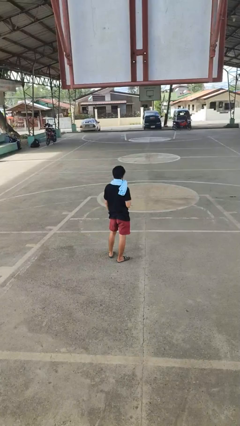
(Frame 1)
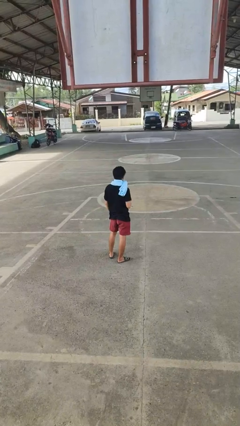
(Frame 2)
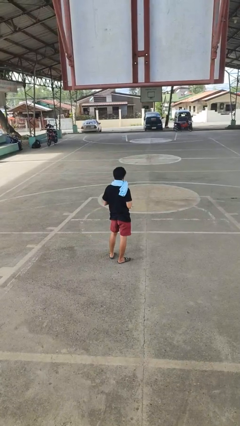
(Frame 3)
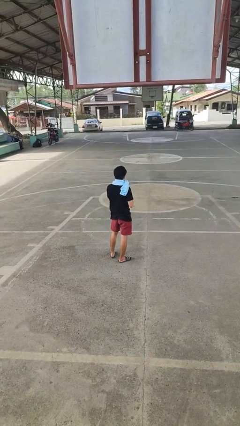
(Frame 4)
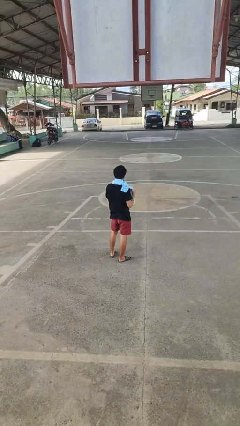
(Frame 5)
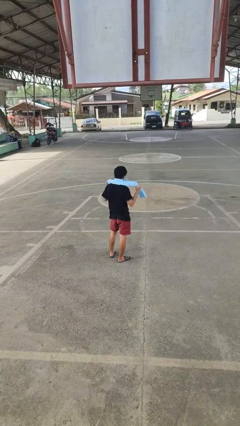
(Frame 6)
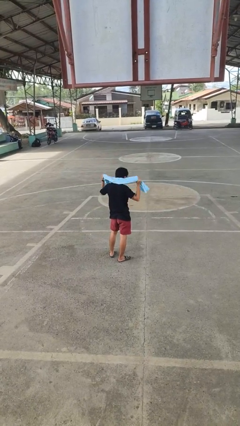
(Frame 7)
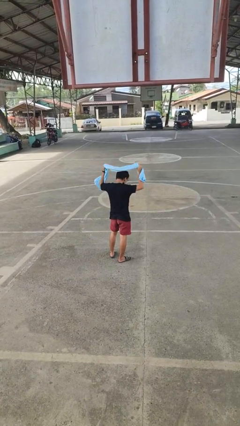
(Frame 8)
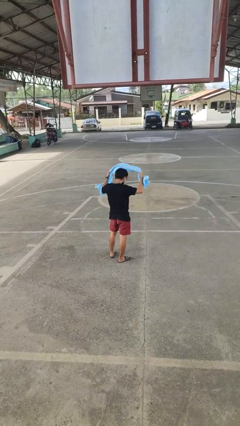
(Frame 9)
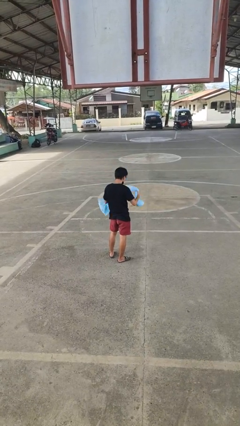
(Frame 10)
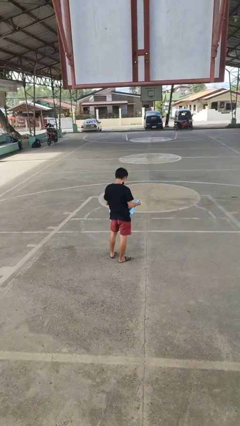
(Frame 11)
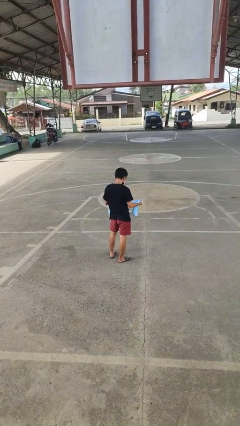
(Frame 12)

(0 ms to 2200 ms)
person takes off scarf

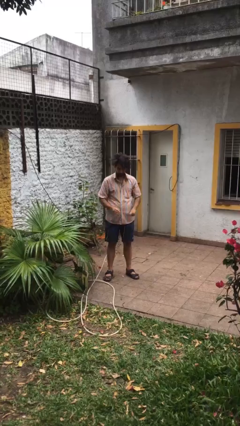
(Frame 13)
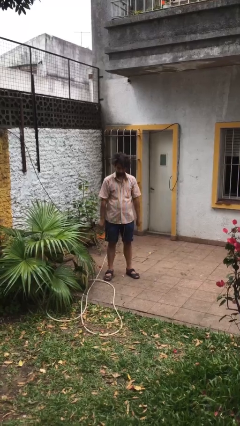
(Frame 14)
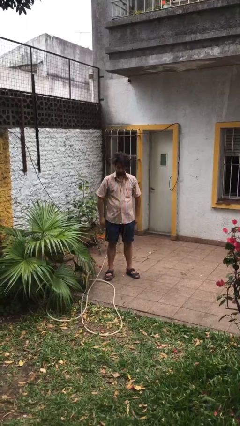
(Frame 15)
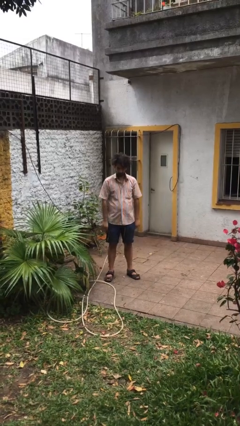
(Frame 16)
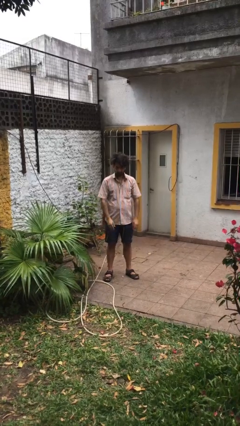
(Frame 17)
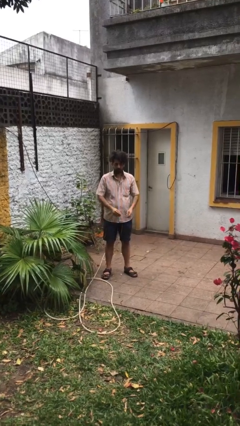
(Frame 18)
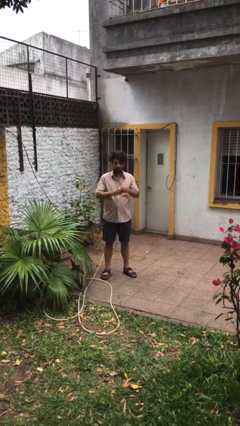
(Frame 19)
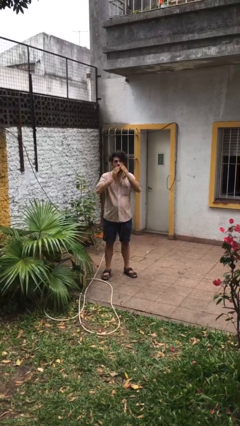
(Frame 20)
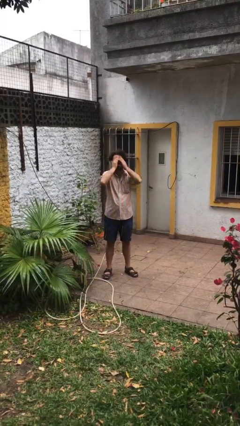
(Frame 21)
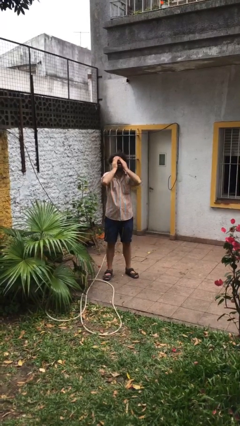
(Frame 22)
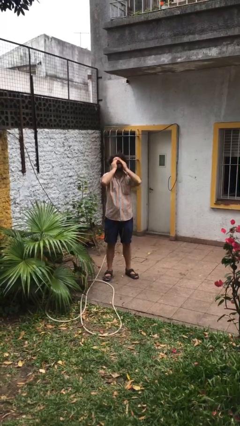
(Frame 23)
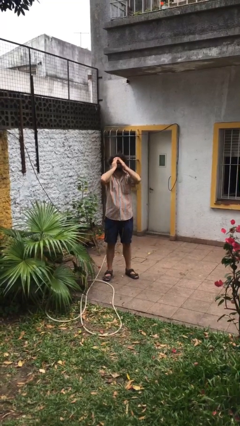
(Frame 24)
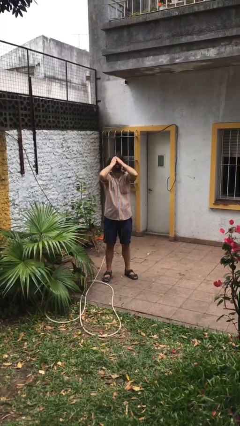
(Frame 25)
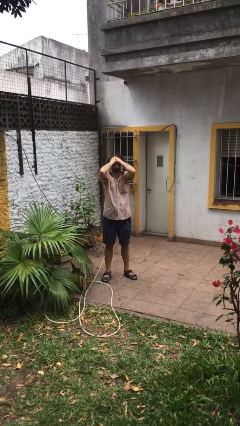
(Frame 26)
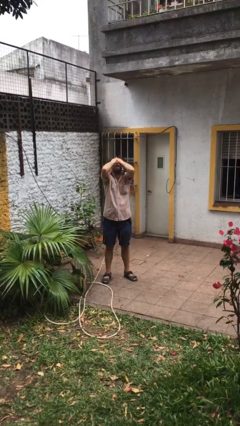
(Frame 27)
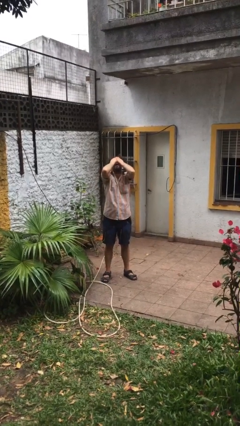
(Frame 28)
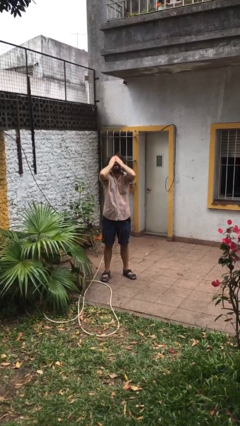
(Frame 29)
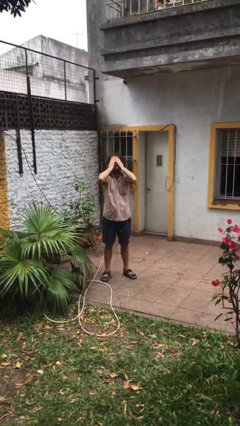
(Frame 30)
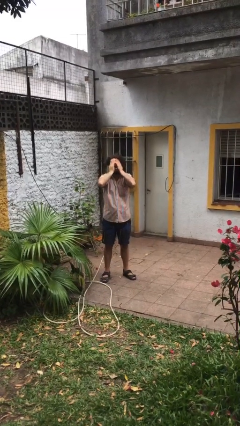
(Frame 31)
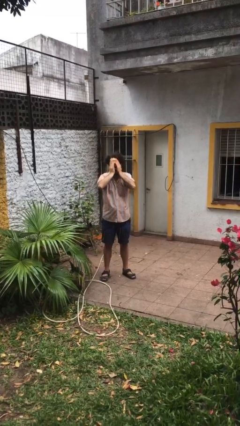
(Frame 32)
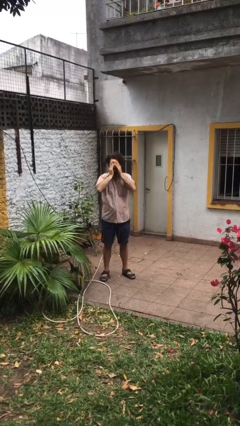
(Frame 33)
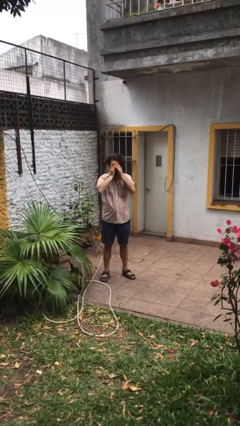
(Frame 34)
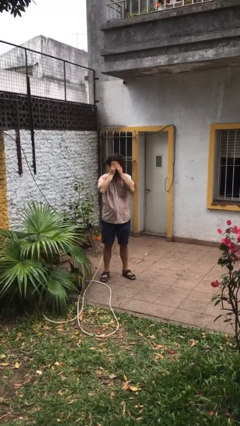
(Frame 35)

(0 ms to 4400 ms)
person rubs eyes

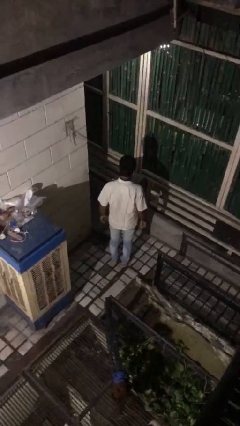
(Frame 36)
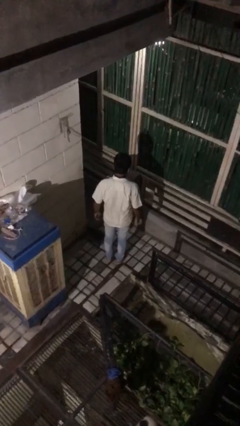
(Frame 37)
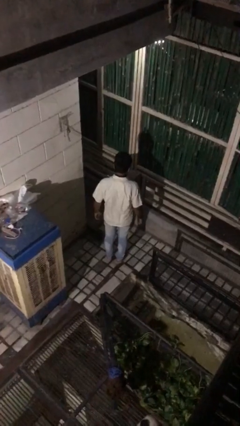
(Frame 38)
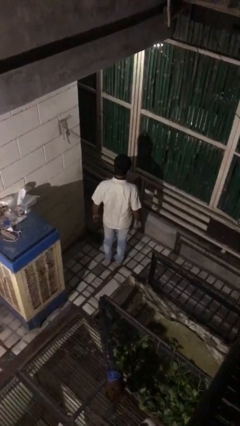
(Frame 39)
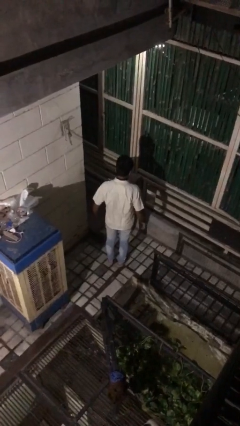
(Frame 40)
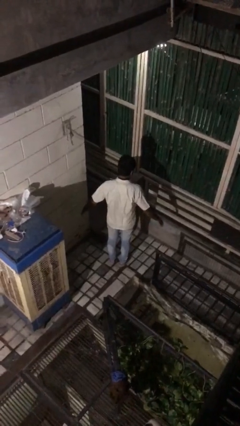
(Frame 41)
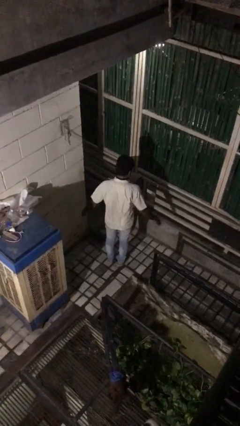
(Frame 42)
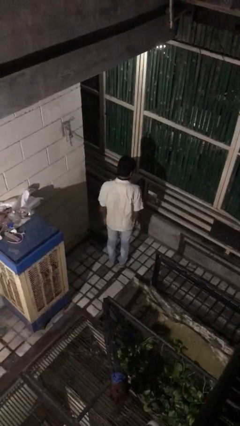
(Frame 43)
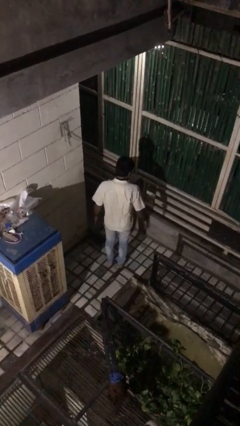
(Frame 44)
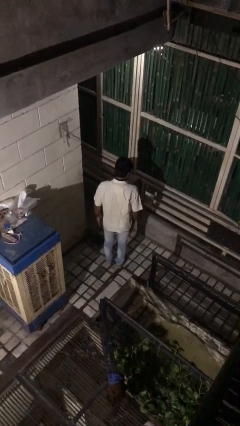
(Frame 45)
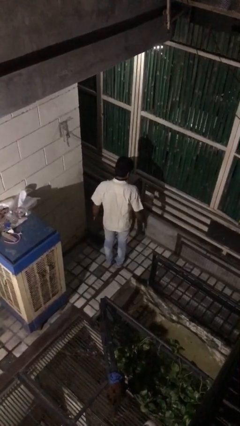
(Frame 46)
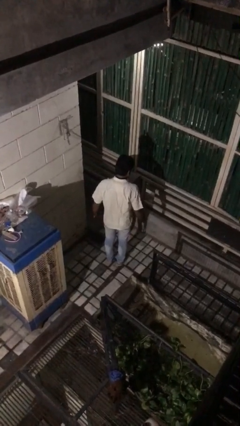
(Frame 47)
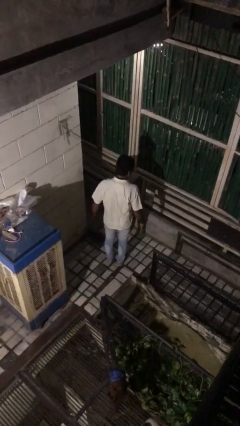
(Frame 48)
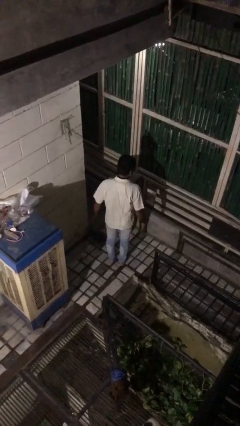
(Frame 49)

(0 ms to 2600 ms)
person slaps hands on thighs

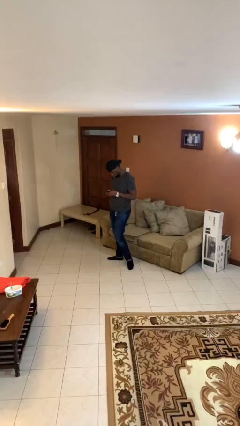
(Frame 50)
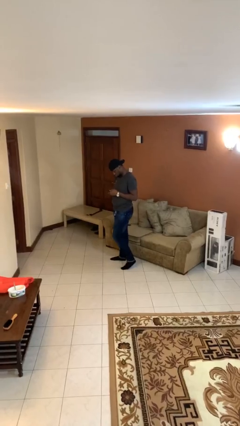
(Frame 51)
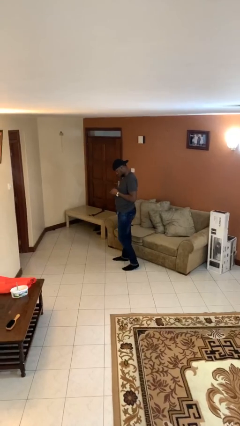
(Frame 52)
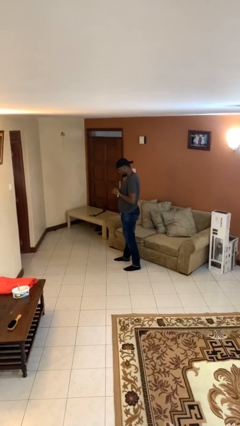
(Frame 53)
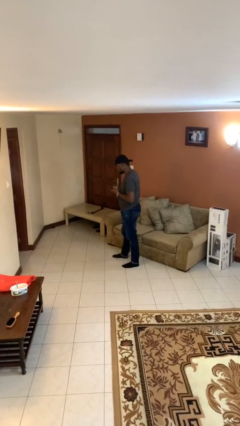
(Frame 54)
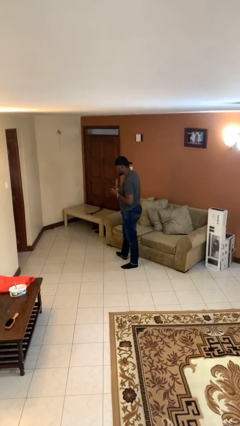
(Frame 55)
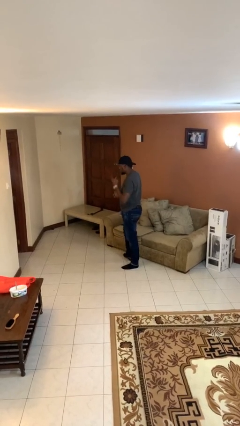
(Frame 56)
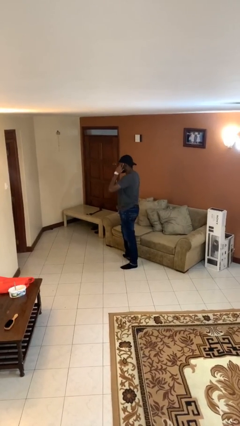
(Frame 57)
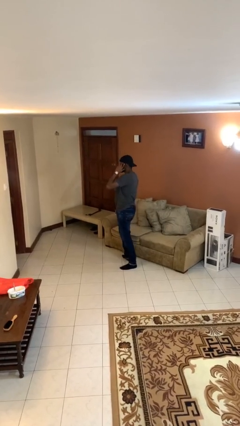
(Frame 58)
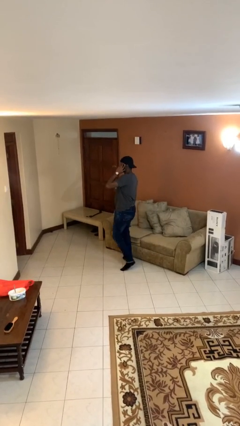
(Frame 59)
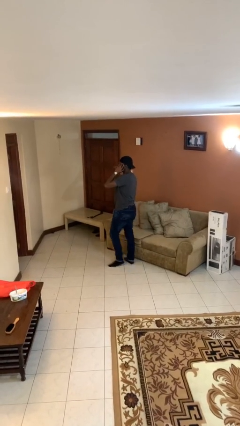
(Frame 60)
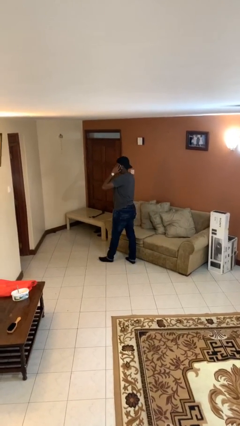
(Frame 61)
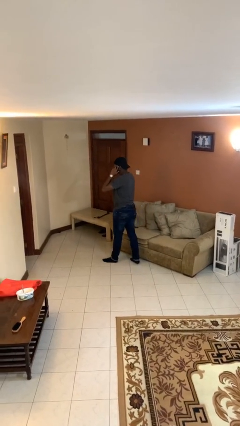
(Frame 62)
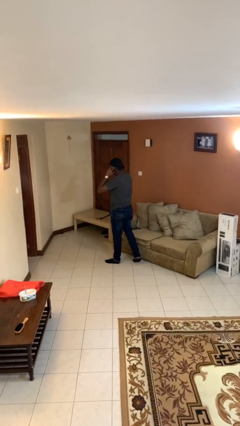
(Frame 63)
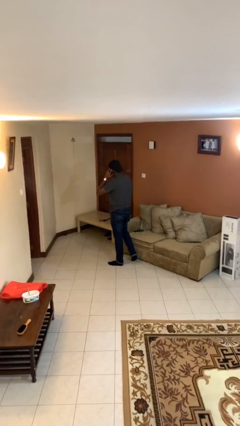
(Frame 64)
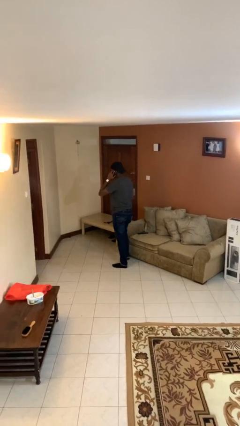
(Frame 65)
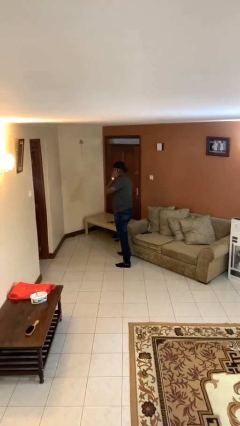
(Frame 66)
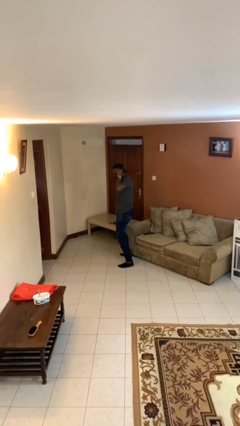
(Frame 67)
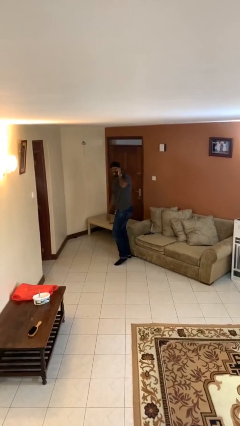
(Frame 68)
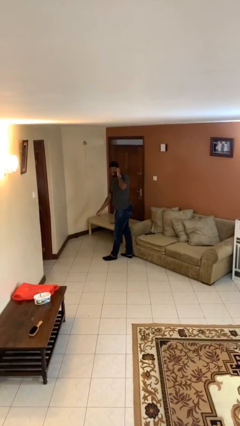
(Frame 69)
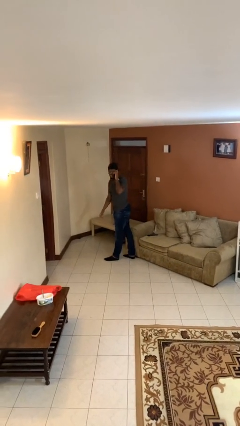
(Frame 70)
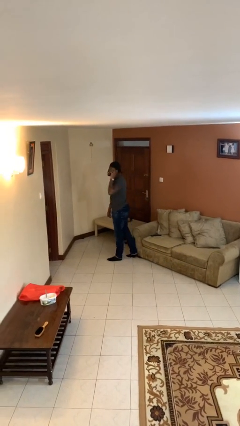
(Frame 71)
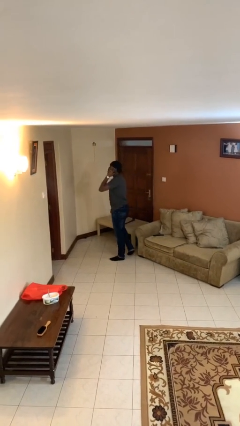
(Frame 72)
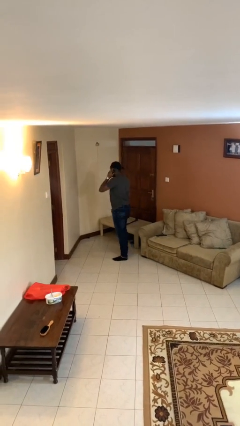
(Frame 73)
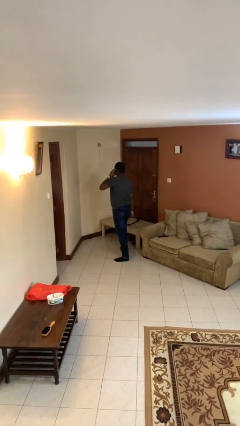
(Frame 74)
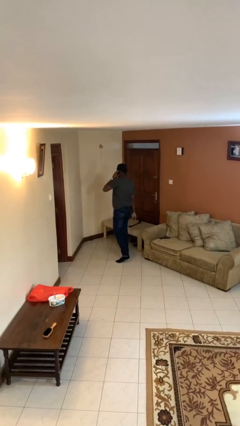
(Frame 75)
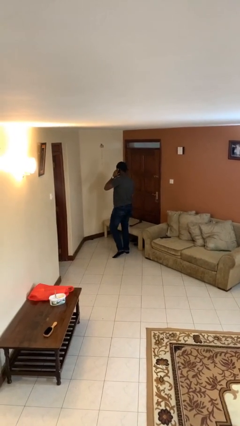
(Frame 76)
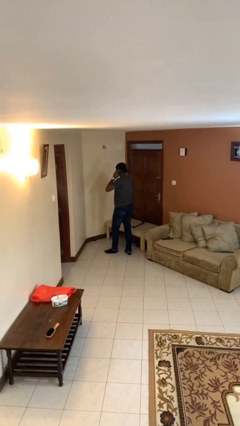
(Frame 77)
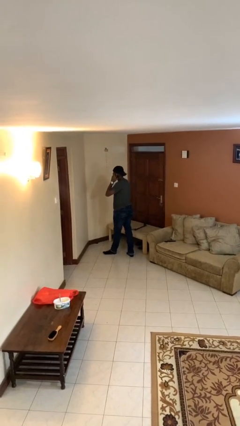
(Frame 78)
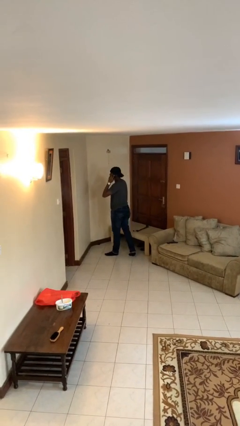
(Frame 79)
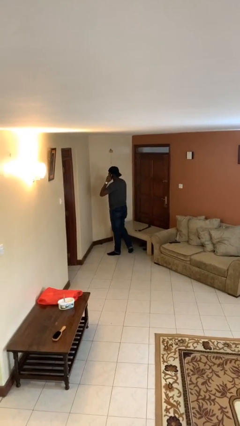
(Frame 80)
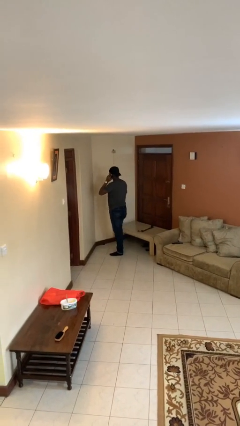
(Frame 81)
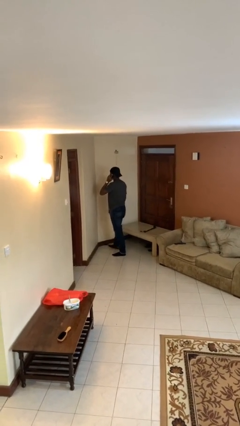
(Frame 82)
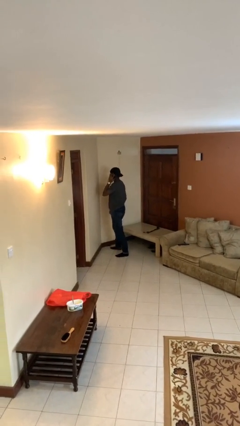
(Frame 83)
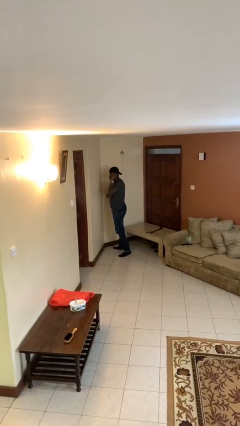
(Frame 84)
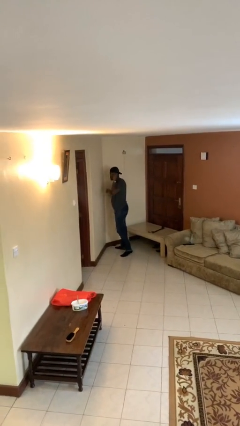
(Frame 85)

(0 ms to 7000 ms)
person talks on phone

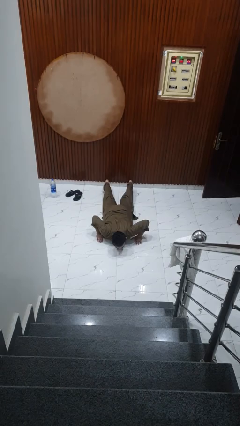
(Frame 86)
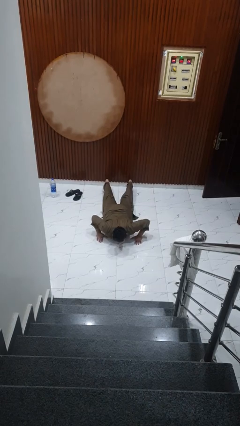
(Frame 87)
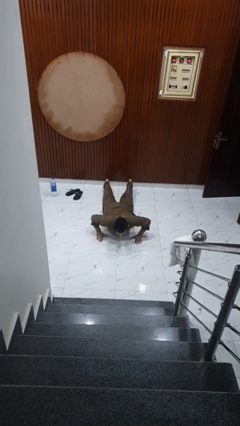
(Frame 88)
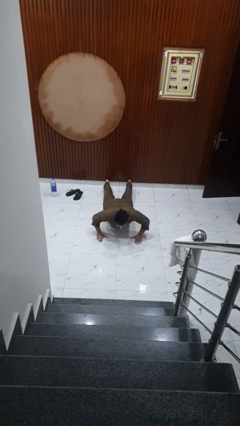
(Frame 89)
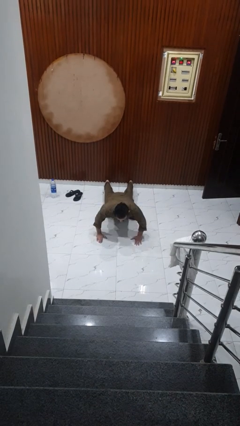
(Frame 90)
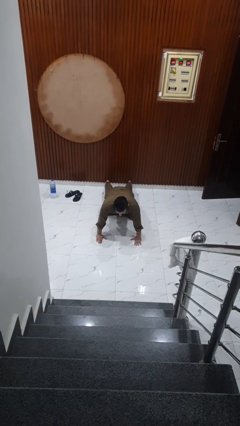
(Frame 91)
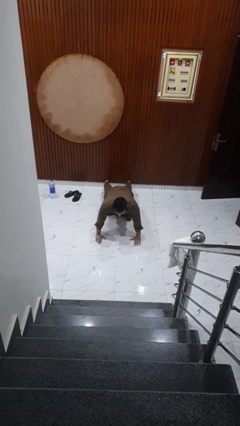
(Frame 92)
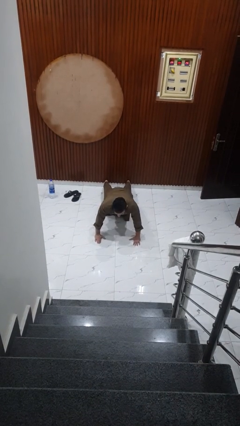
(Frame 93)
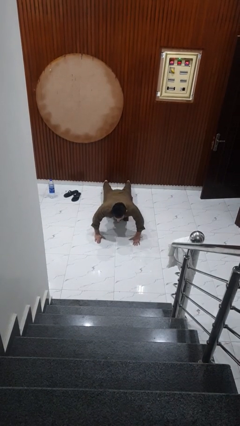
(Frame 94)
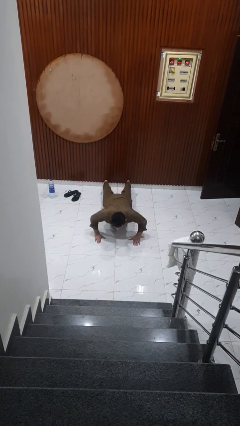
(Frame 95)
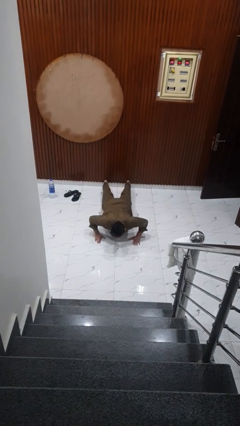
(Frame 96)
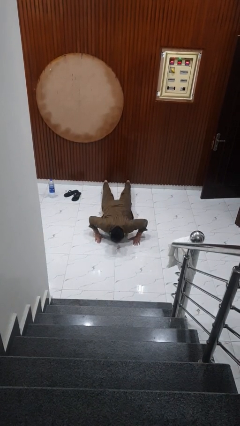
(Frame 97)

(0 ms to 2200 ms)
person exercises with pushup
